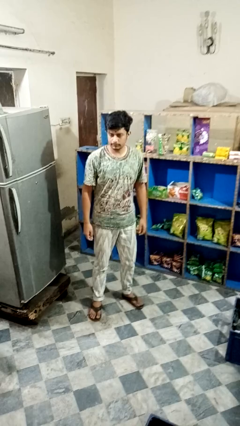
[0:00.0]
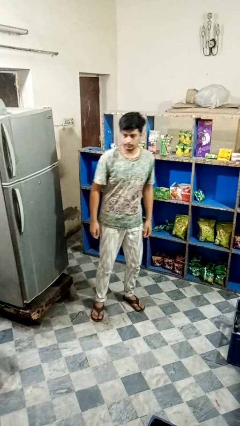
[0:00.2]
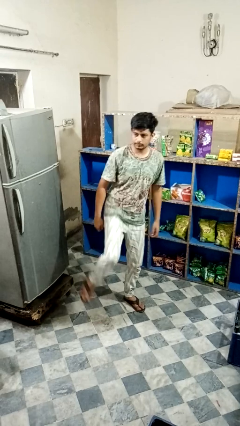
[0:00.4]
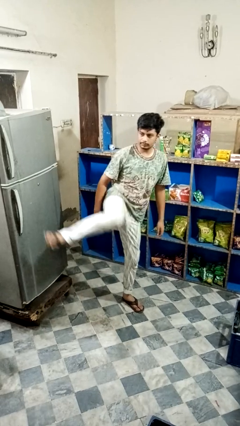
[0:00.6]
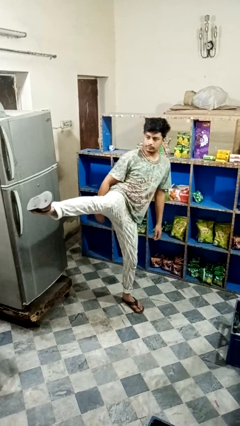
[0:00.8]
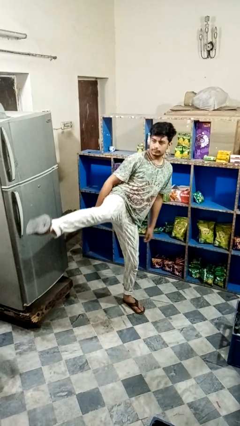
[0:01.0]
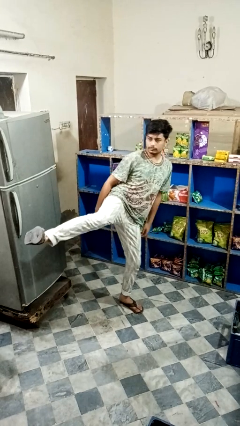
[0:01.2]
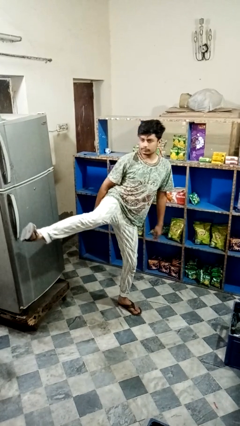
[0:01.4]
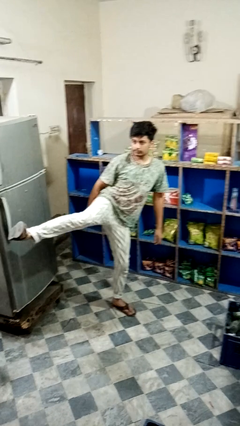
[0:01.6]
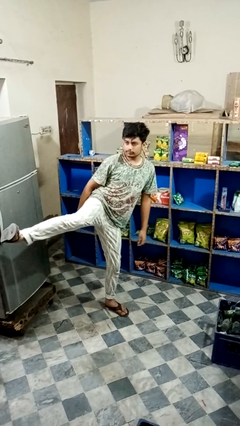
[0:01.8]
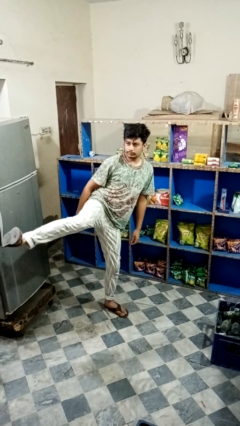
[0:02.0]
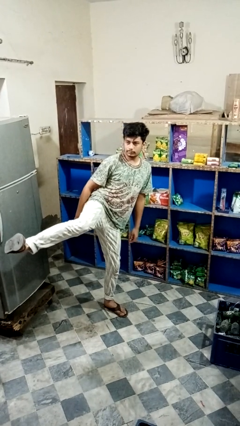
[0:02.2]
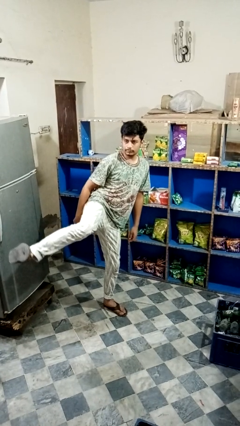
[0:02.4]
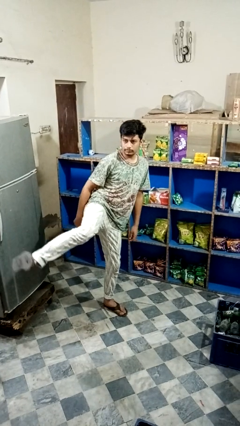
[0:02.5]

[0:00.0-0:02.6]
person karate kicks

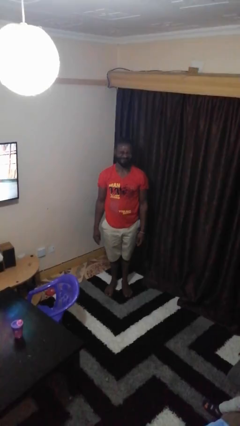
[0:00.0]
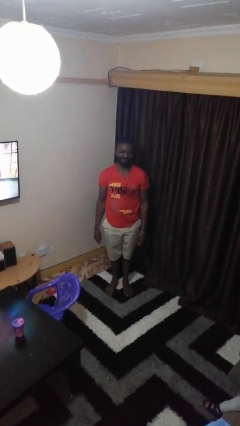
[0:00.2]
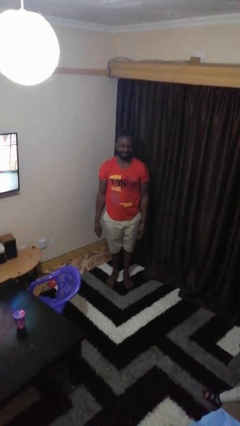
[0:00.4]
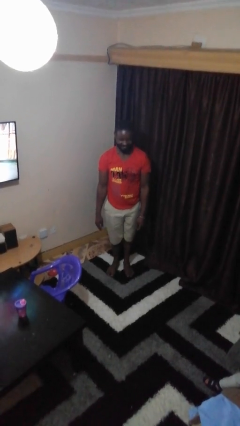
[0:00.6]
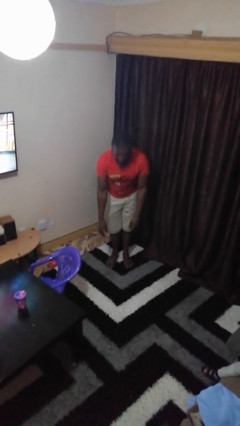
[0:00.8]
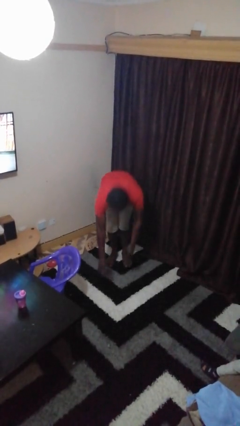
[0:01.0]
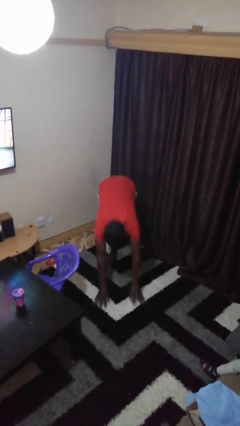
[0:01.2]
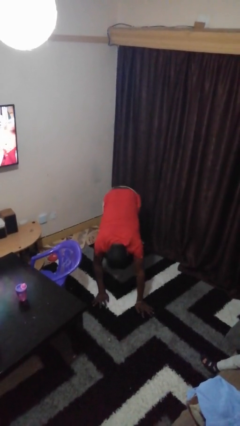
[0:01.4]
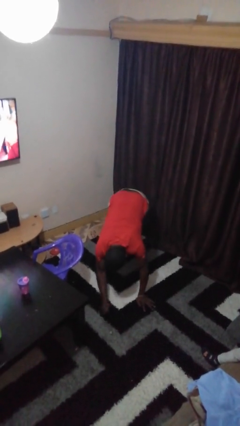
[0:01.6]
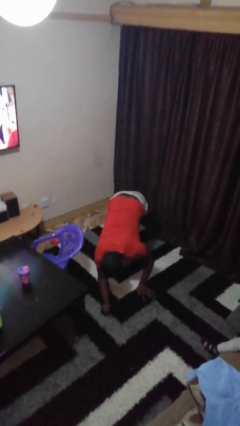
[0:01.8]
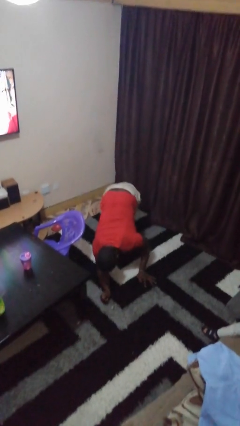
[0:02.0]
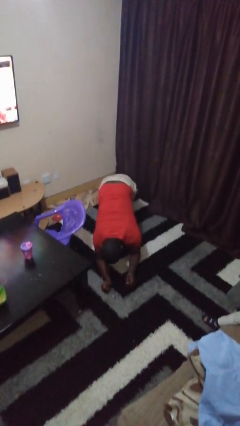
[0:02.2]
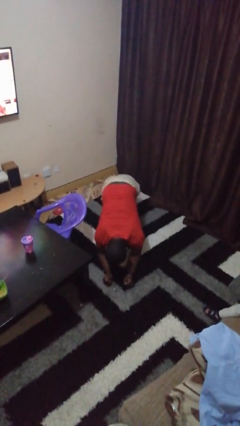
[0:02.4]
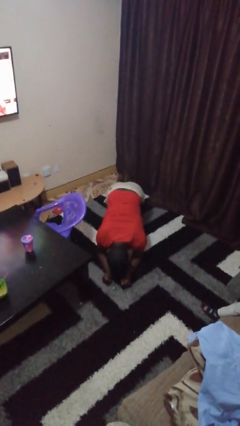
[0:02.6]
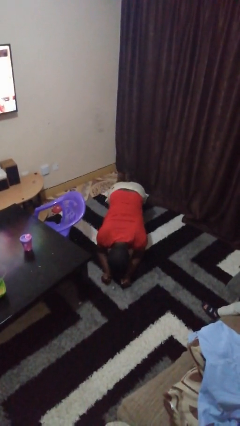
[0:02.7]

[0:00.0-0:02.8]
person exercises with plank

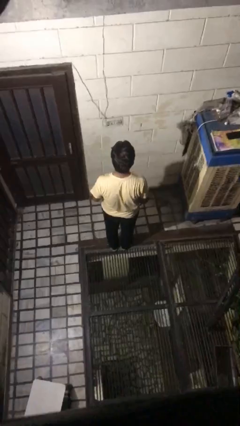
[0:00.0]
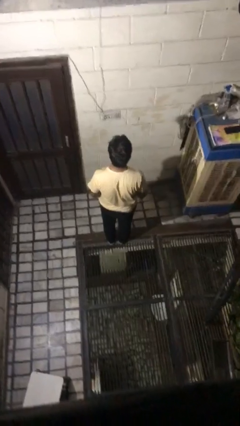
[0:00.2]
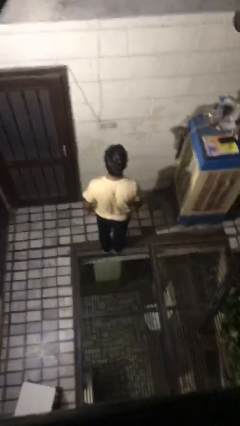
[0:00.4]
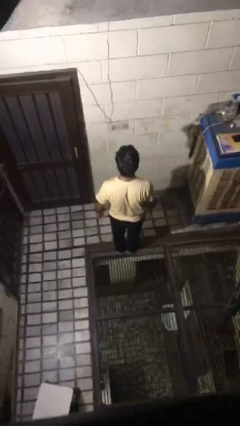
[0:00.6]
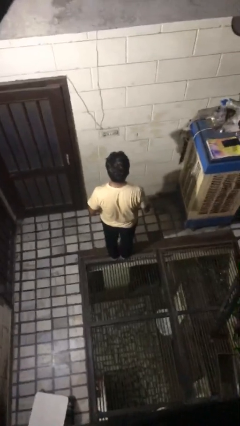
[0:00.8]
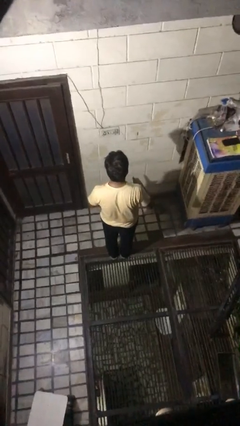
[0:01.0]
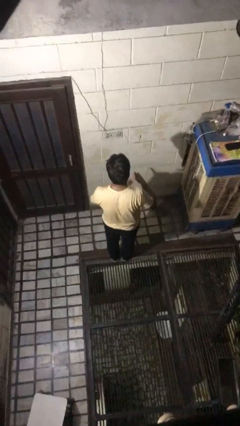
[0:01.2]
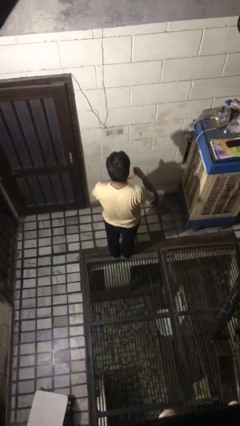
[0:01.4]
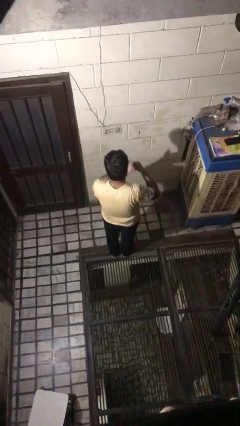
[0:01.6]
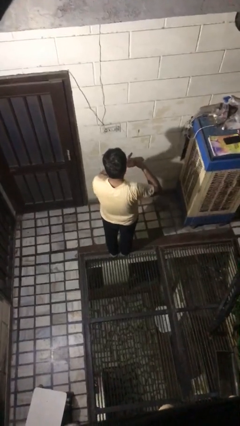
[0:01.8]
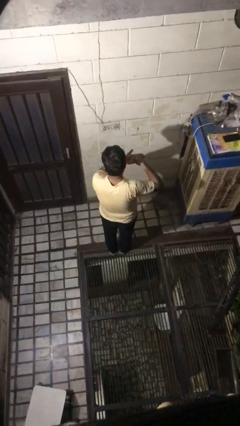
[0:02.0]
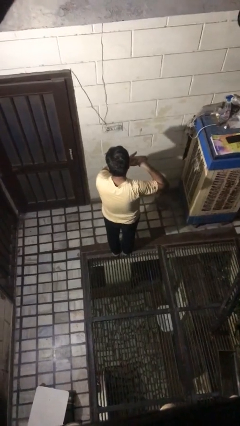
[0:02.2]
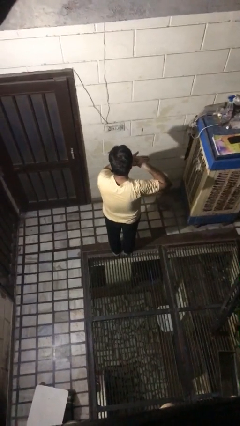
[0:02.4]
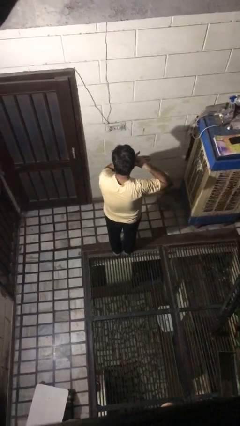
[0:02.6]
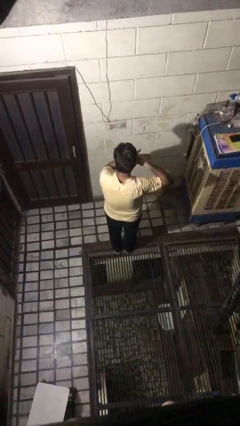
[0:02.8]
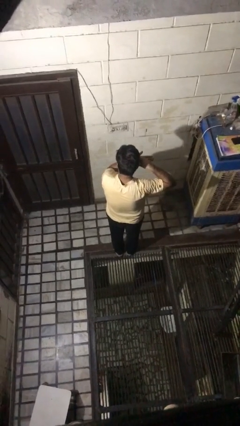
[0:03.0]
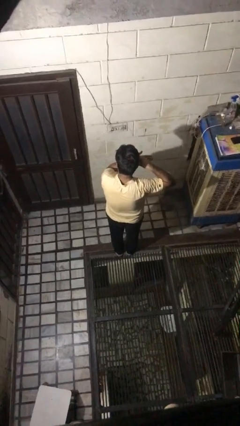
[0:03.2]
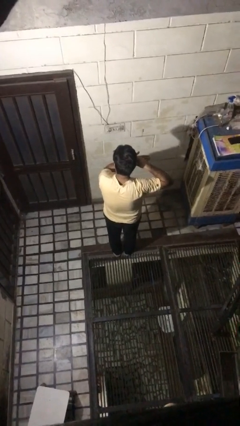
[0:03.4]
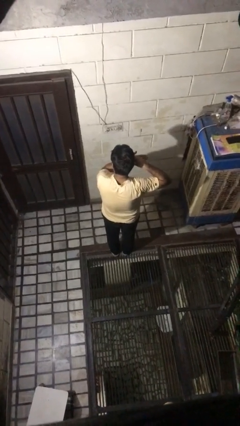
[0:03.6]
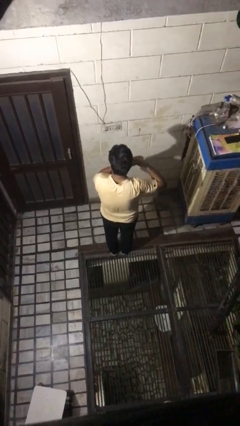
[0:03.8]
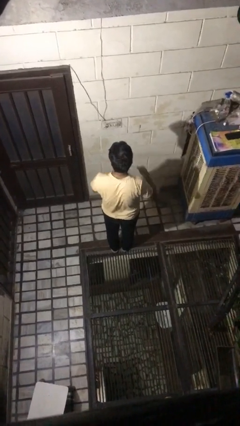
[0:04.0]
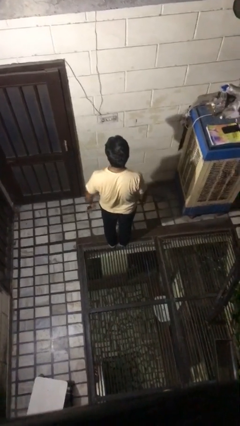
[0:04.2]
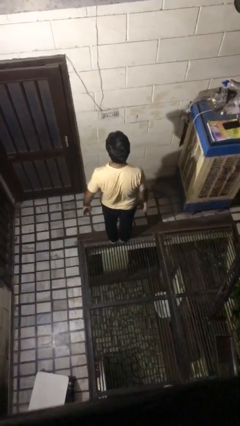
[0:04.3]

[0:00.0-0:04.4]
person gestures call me

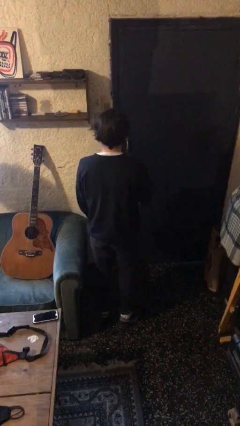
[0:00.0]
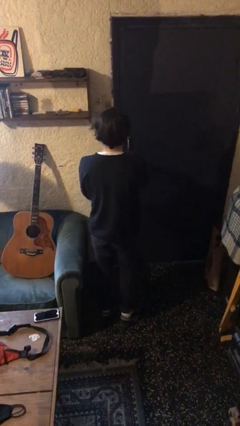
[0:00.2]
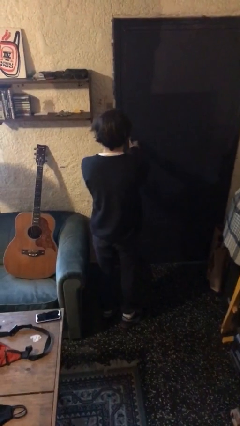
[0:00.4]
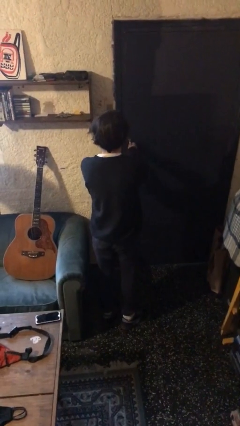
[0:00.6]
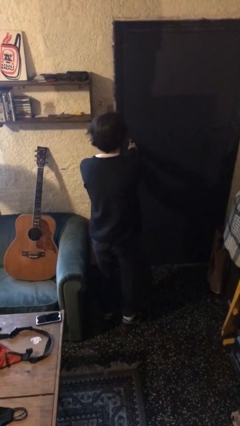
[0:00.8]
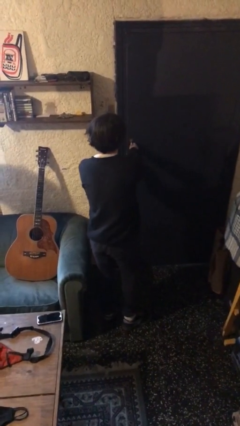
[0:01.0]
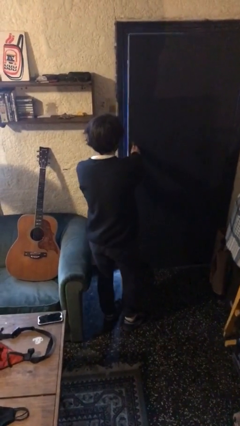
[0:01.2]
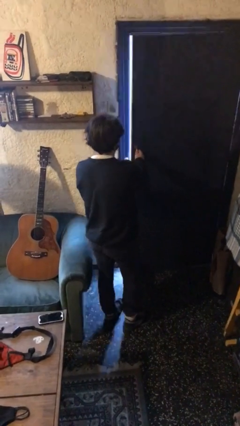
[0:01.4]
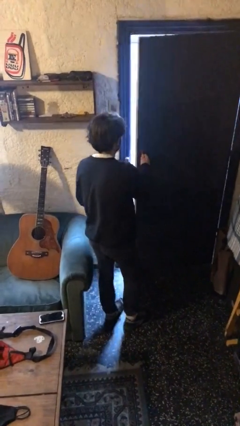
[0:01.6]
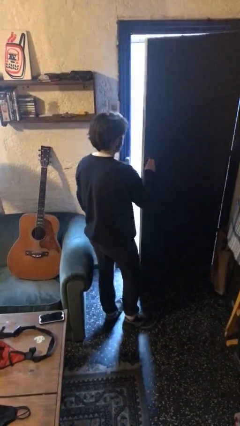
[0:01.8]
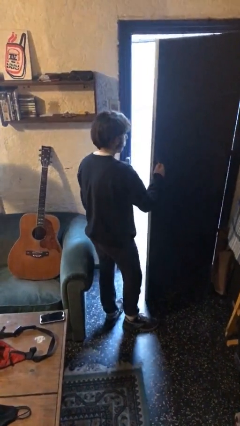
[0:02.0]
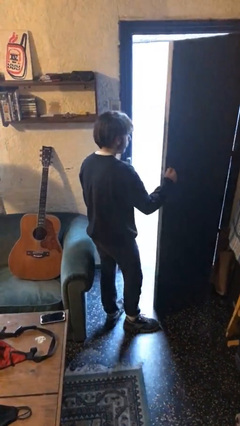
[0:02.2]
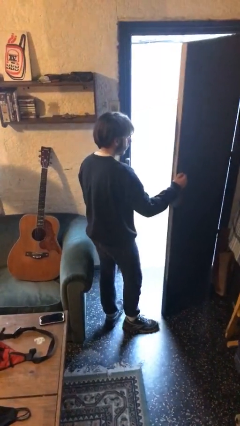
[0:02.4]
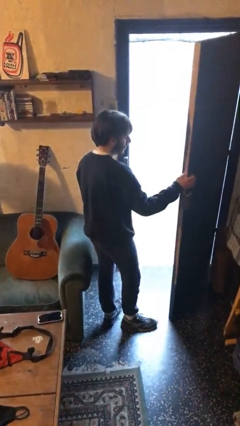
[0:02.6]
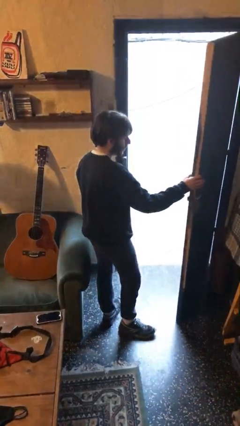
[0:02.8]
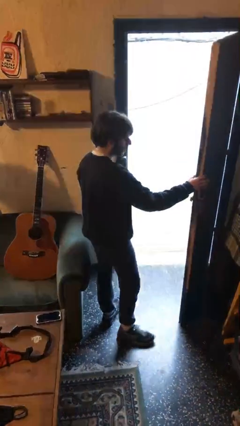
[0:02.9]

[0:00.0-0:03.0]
person opens facility door

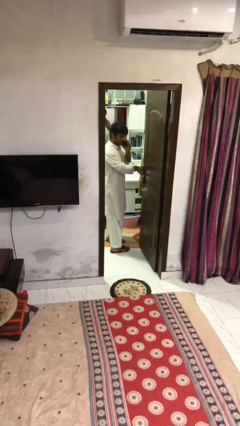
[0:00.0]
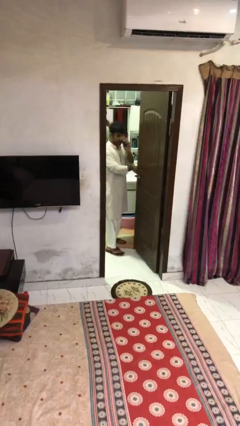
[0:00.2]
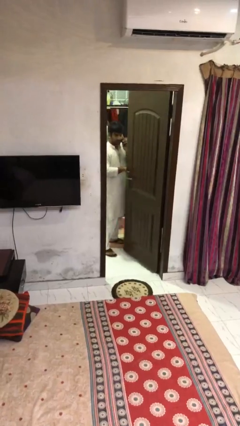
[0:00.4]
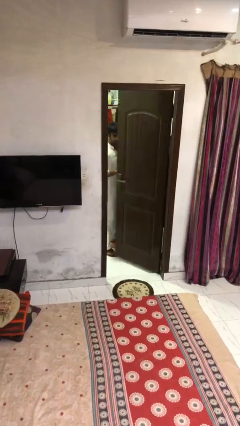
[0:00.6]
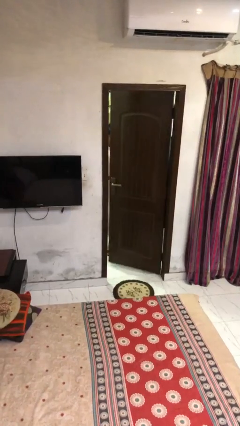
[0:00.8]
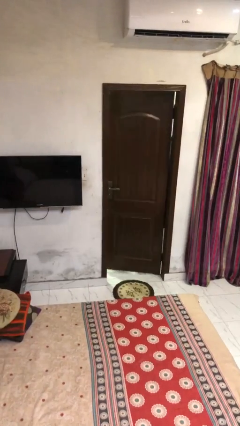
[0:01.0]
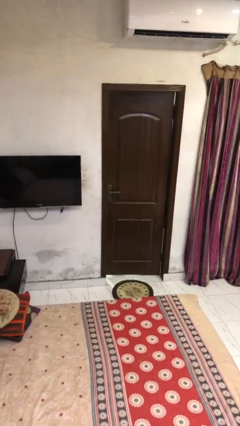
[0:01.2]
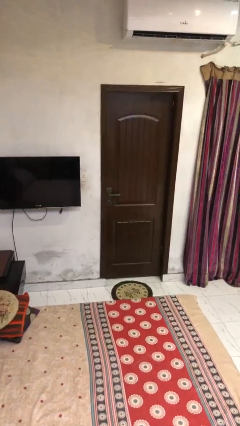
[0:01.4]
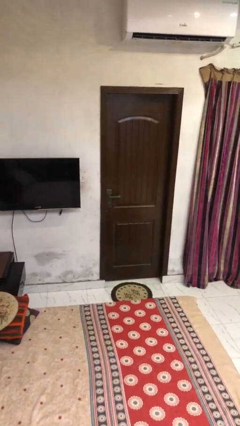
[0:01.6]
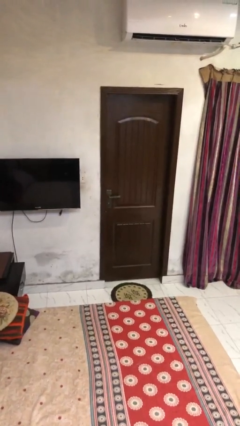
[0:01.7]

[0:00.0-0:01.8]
person closes facility door

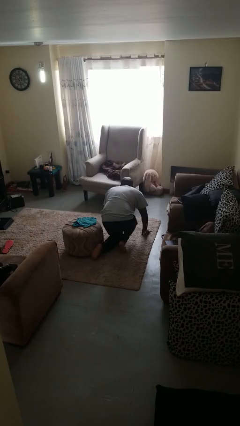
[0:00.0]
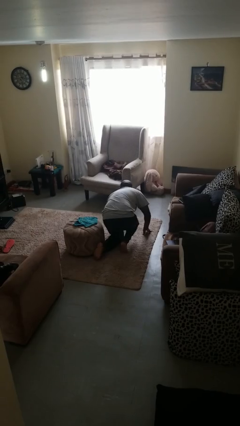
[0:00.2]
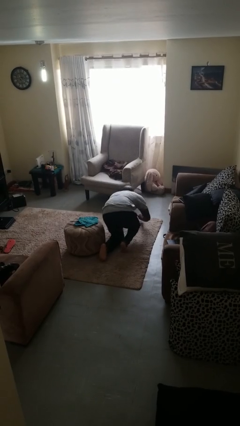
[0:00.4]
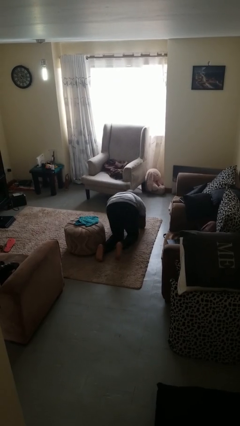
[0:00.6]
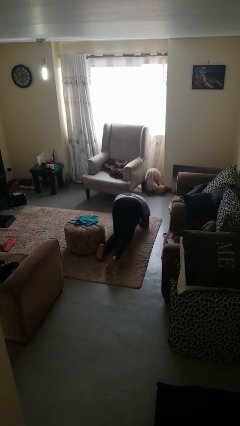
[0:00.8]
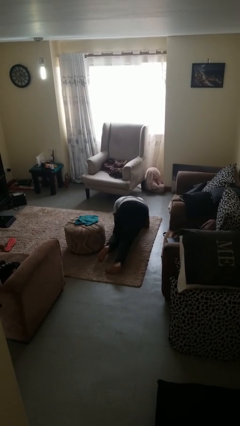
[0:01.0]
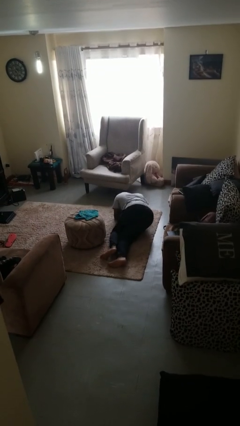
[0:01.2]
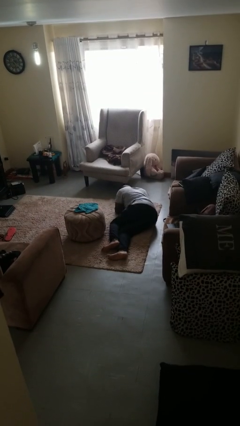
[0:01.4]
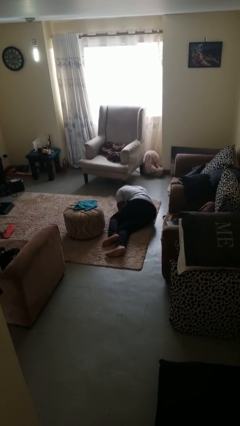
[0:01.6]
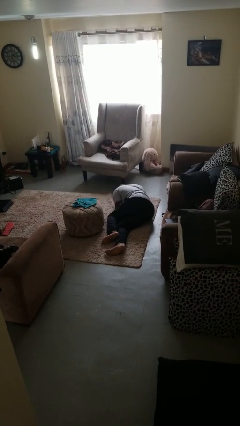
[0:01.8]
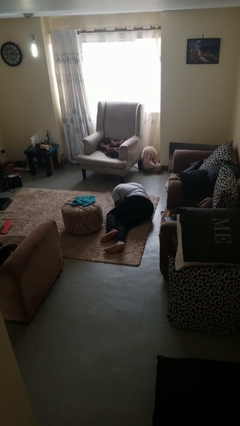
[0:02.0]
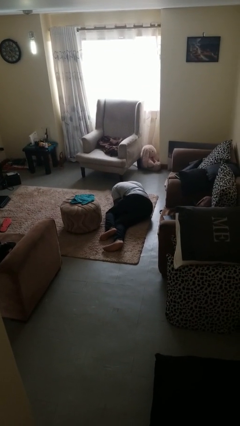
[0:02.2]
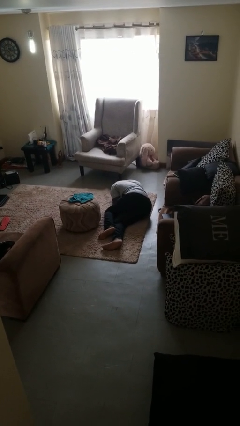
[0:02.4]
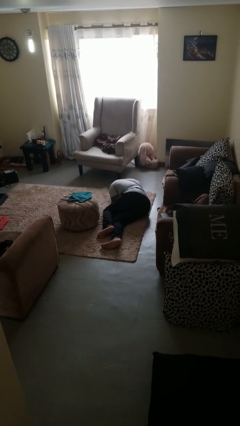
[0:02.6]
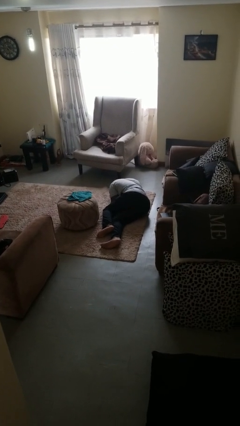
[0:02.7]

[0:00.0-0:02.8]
person lies down on floor
